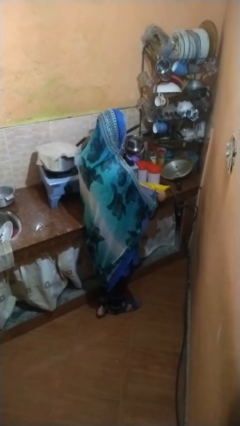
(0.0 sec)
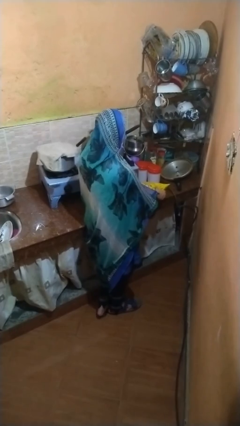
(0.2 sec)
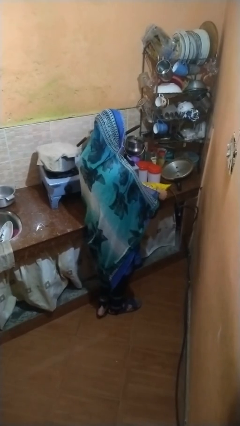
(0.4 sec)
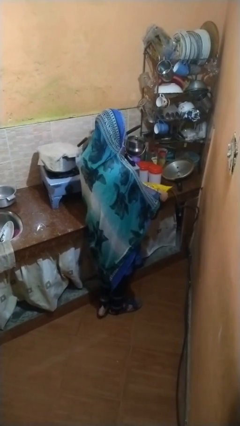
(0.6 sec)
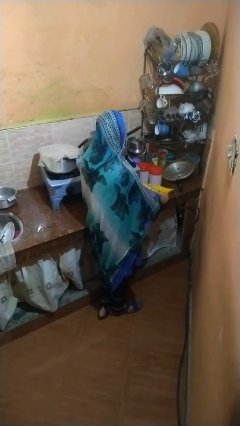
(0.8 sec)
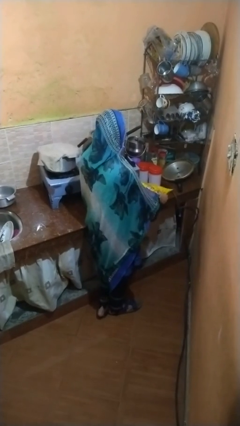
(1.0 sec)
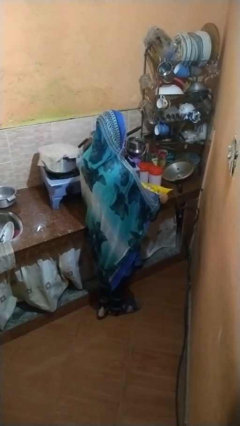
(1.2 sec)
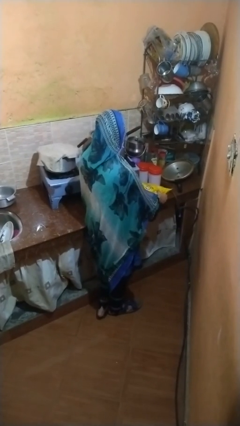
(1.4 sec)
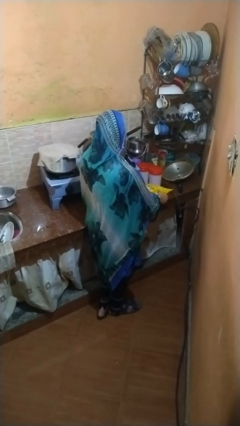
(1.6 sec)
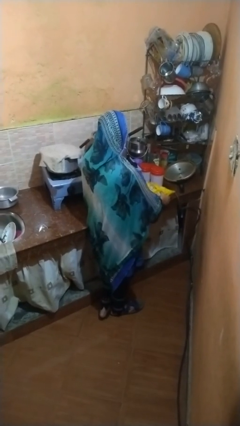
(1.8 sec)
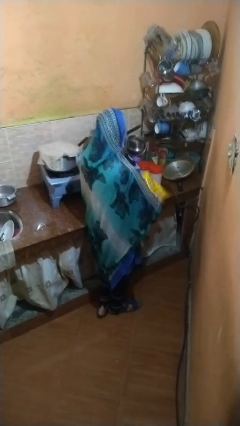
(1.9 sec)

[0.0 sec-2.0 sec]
person pours into bowl

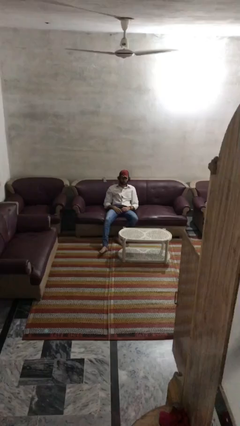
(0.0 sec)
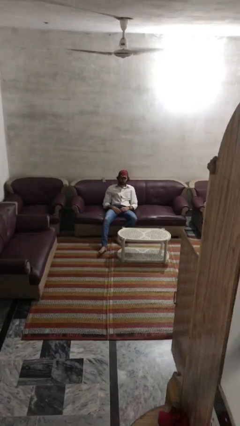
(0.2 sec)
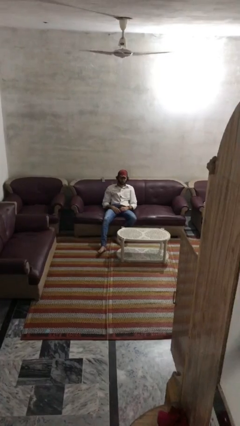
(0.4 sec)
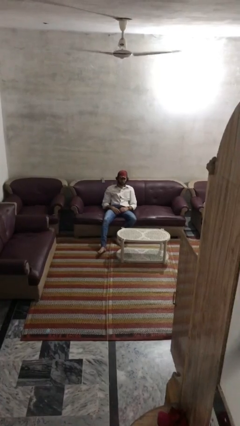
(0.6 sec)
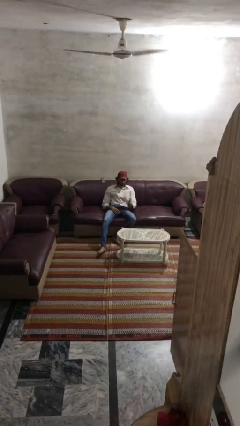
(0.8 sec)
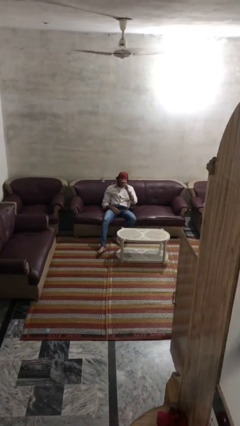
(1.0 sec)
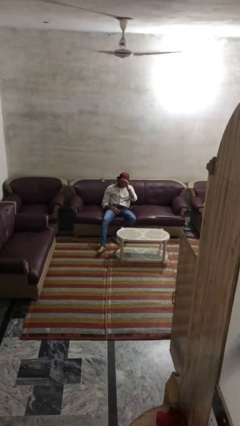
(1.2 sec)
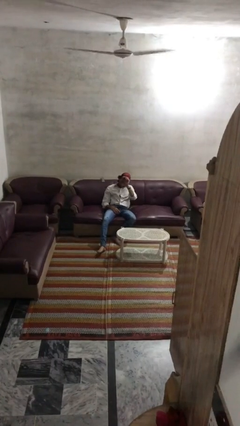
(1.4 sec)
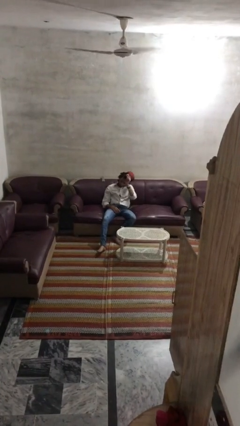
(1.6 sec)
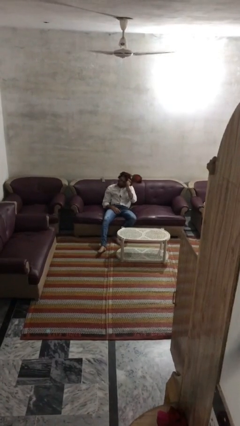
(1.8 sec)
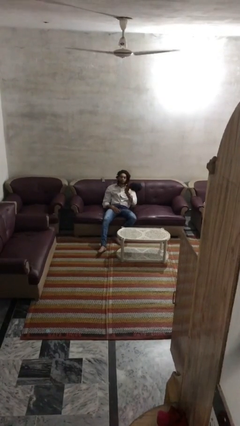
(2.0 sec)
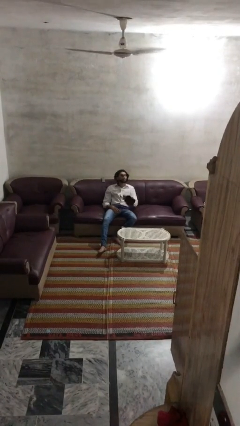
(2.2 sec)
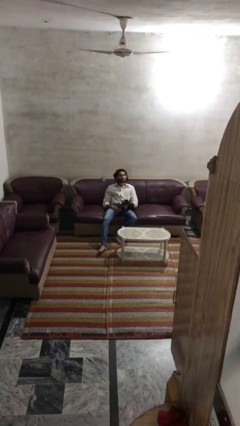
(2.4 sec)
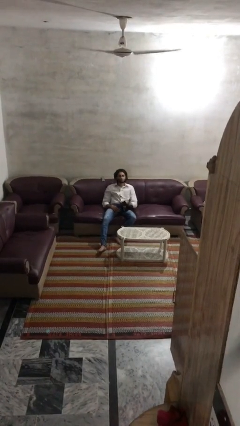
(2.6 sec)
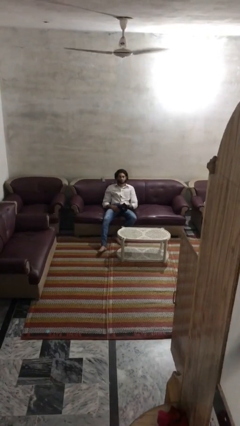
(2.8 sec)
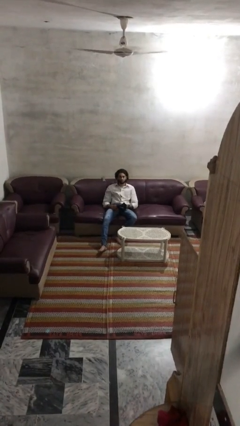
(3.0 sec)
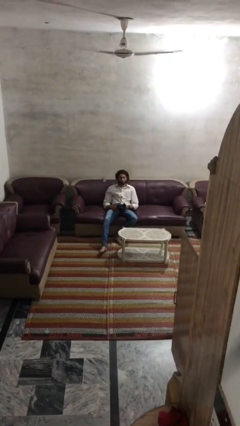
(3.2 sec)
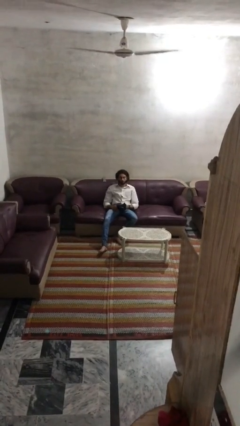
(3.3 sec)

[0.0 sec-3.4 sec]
person takes off hat

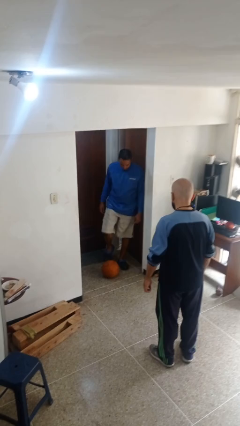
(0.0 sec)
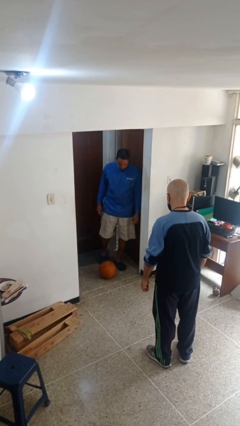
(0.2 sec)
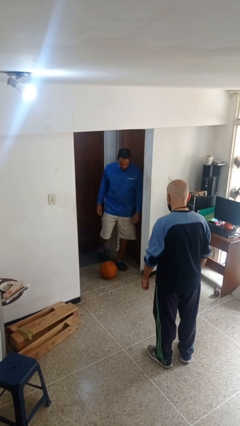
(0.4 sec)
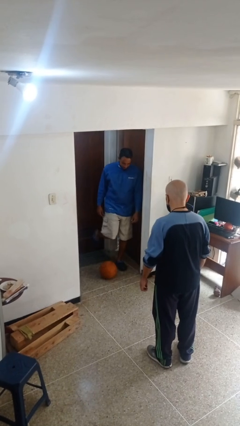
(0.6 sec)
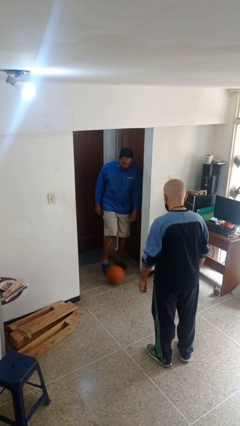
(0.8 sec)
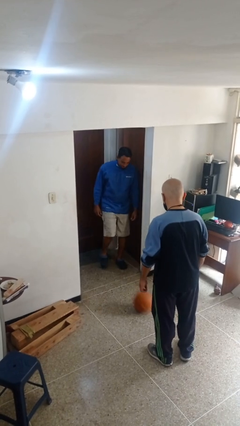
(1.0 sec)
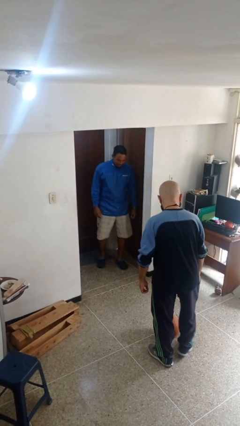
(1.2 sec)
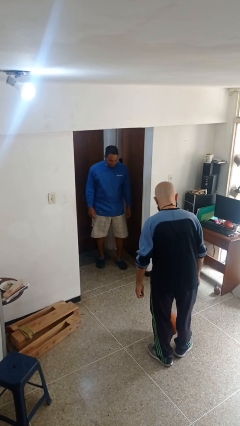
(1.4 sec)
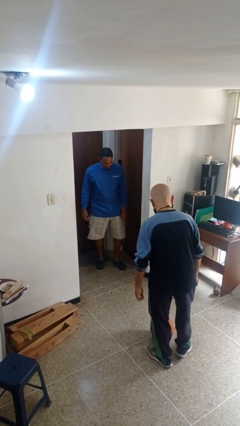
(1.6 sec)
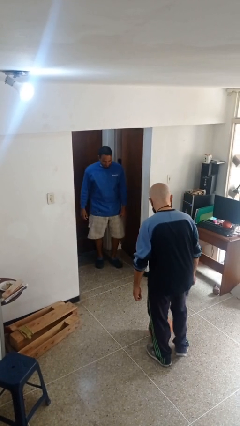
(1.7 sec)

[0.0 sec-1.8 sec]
person kicks object to person

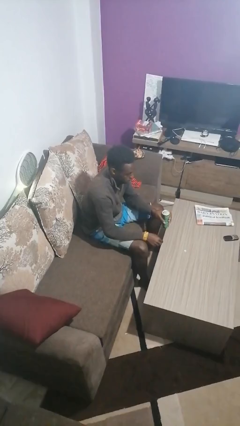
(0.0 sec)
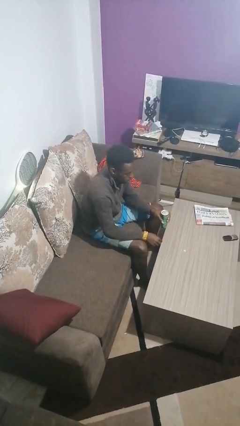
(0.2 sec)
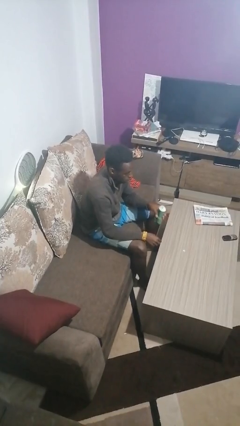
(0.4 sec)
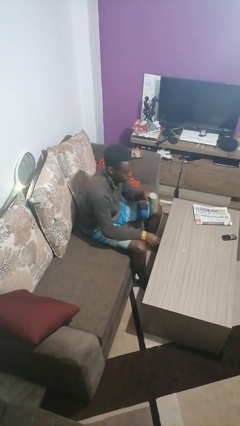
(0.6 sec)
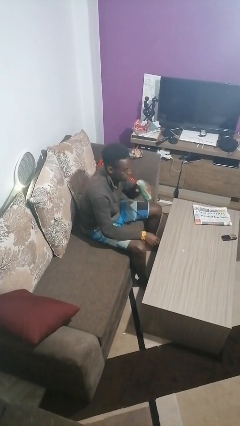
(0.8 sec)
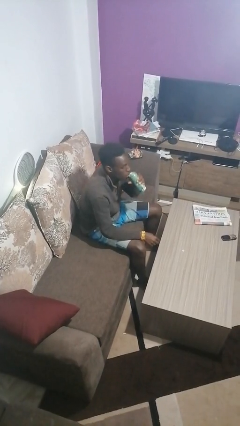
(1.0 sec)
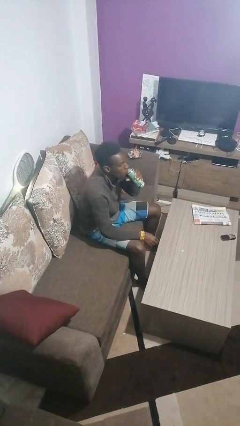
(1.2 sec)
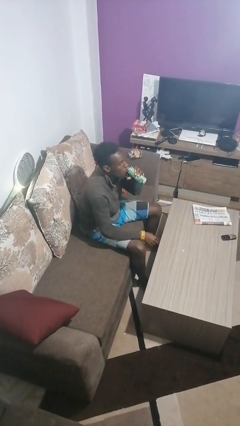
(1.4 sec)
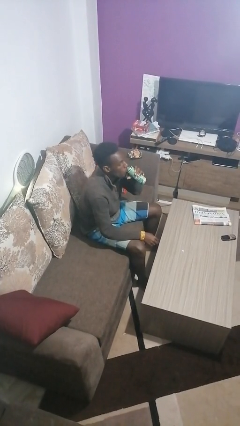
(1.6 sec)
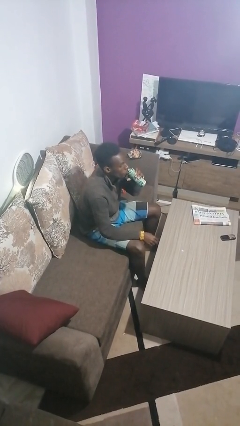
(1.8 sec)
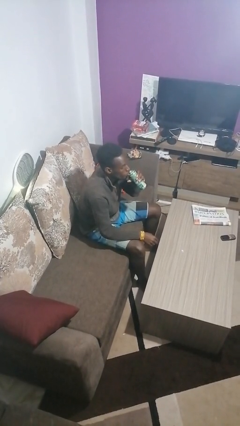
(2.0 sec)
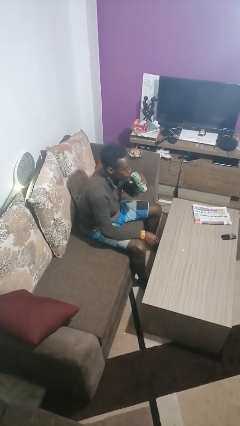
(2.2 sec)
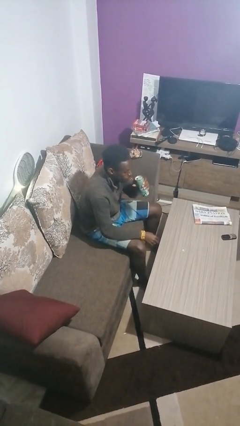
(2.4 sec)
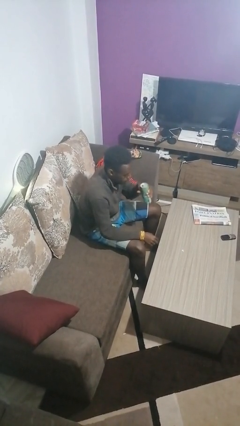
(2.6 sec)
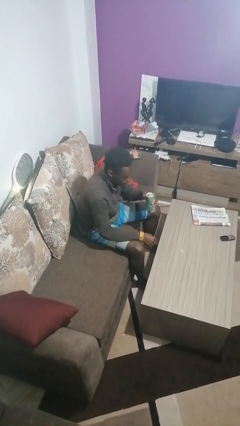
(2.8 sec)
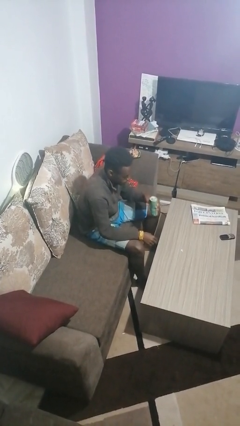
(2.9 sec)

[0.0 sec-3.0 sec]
person drinks from beverage can

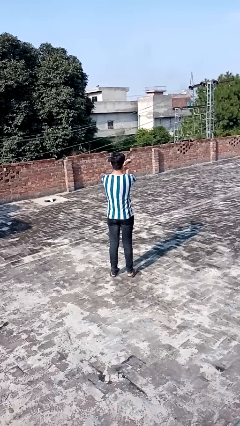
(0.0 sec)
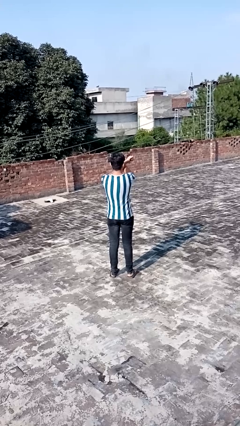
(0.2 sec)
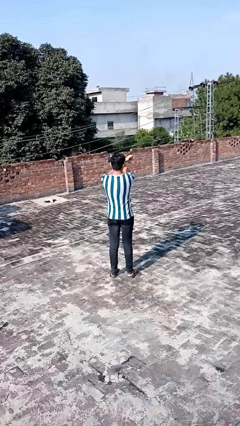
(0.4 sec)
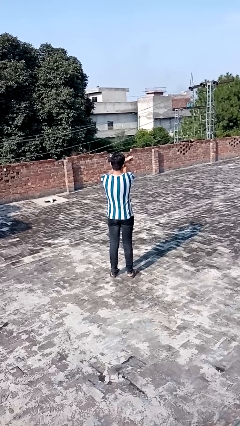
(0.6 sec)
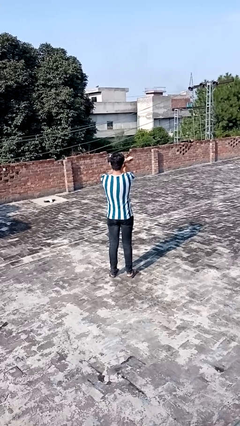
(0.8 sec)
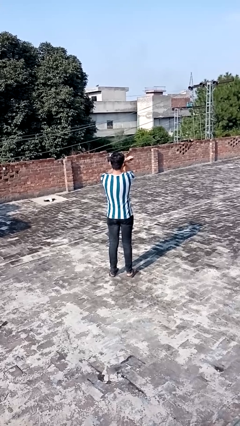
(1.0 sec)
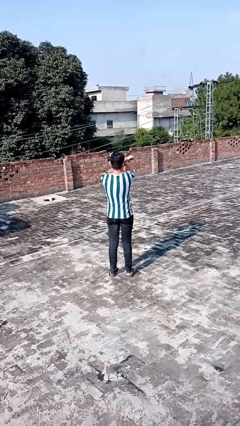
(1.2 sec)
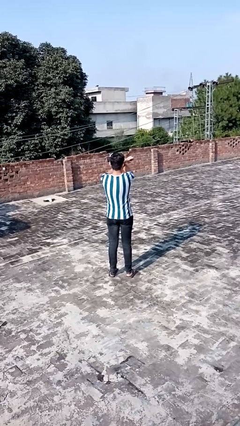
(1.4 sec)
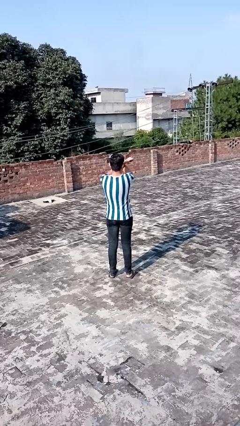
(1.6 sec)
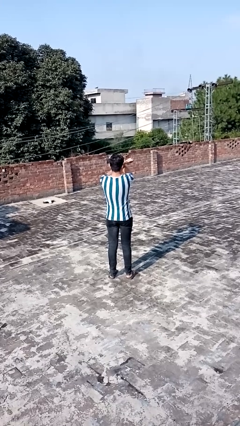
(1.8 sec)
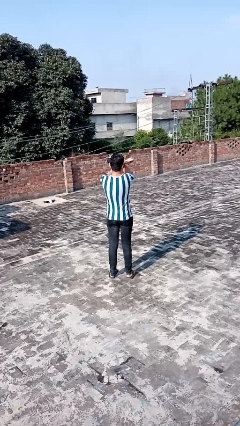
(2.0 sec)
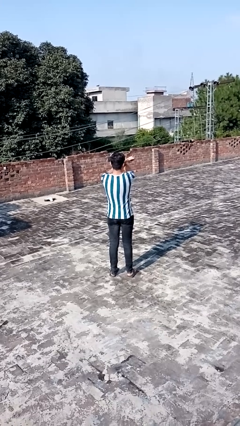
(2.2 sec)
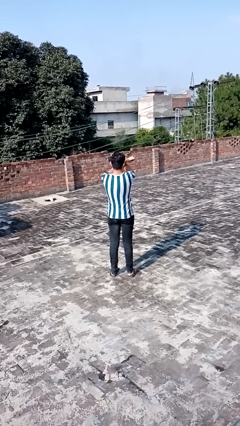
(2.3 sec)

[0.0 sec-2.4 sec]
person gestures arms x

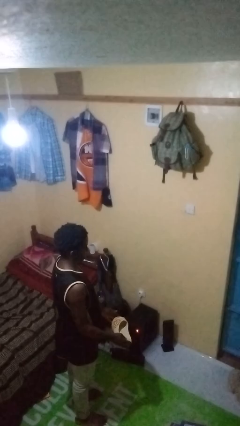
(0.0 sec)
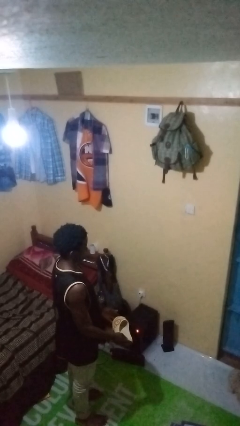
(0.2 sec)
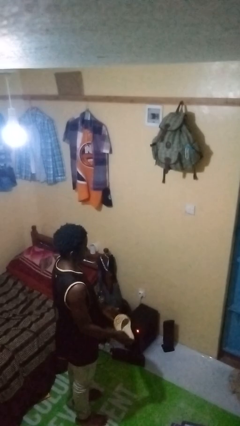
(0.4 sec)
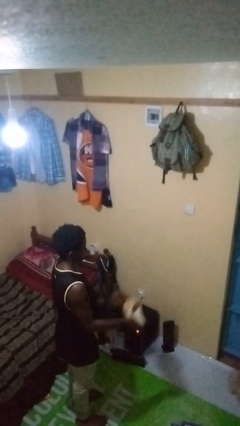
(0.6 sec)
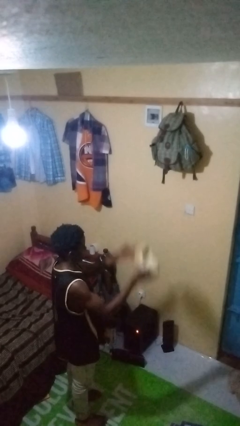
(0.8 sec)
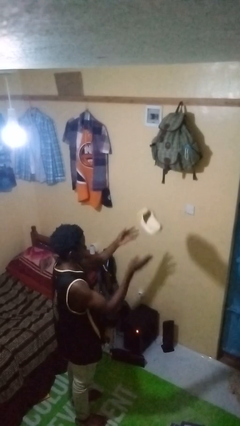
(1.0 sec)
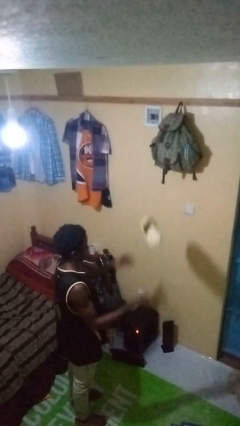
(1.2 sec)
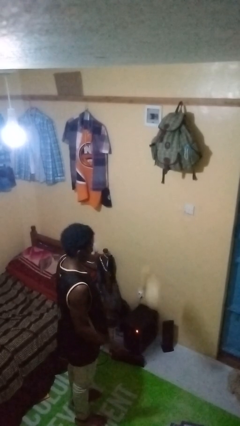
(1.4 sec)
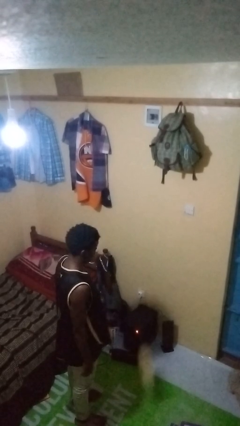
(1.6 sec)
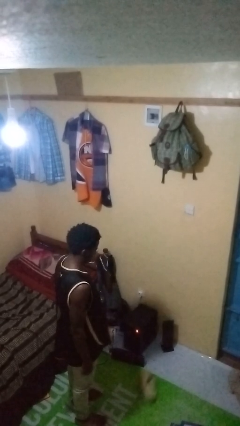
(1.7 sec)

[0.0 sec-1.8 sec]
person throws object into air

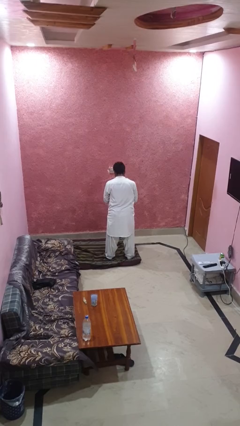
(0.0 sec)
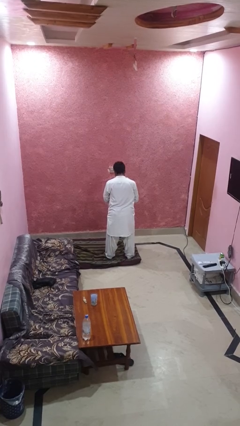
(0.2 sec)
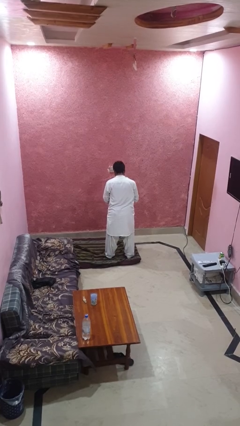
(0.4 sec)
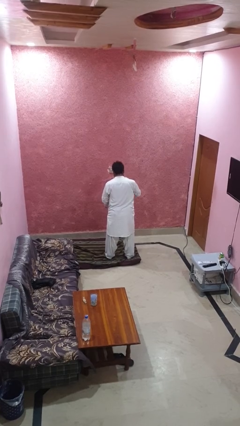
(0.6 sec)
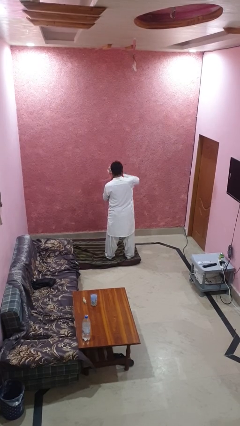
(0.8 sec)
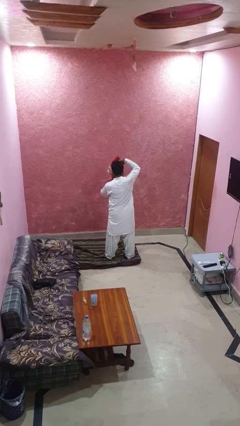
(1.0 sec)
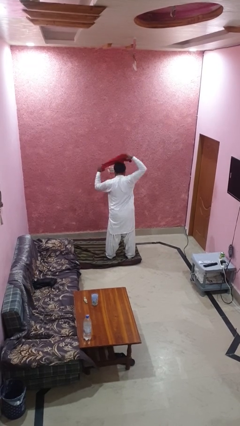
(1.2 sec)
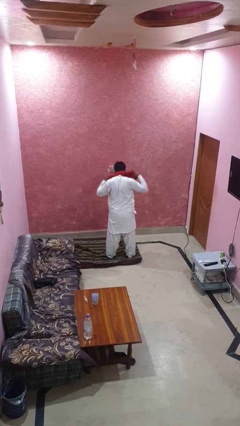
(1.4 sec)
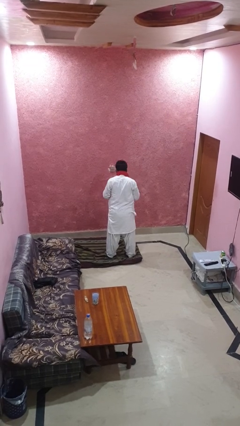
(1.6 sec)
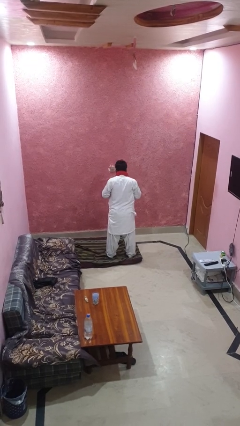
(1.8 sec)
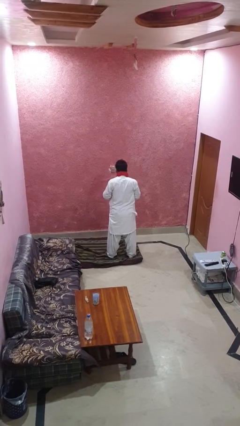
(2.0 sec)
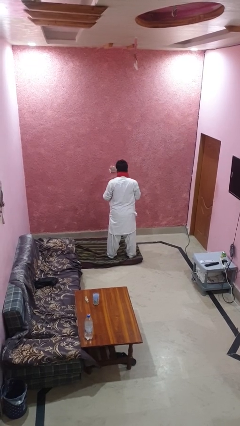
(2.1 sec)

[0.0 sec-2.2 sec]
person puts on scarf
